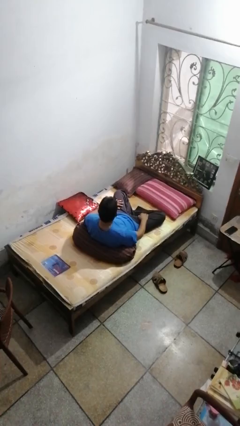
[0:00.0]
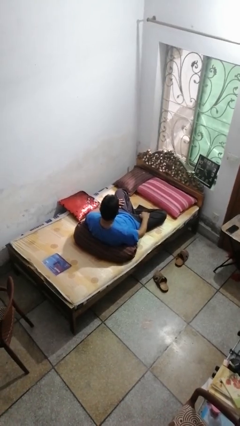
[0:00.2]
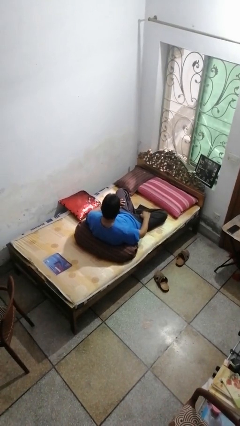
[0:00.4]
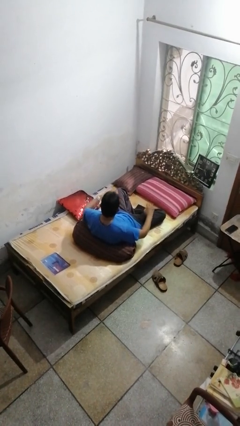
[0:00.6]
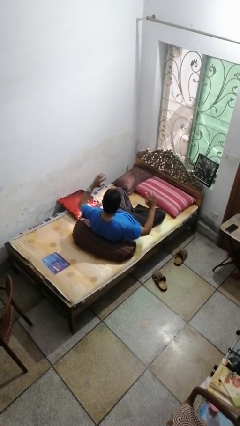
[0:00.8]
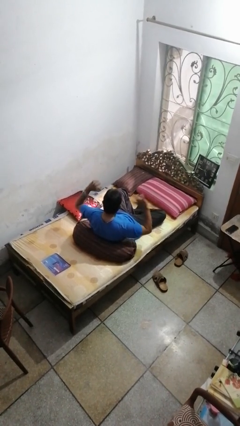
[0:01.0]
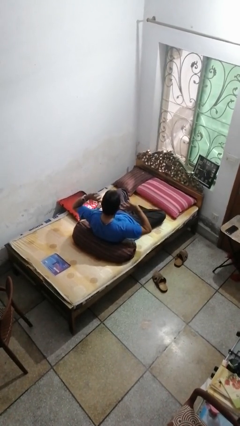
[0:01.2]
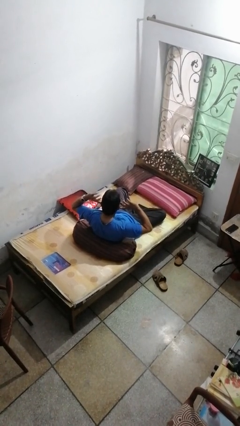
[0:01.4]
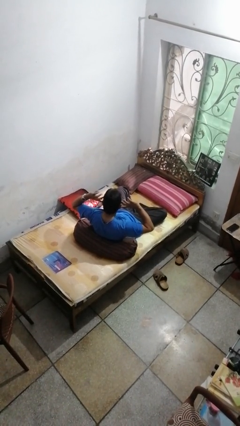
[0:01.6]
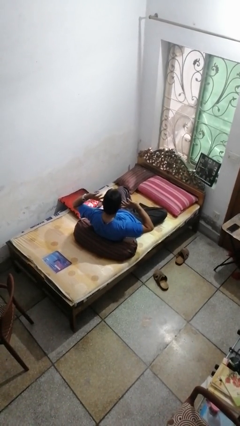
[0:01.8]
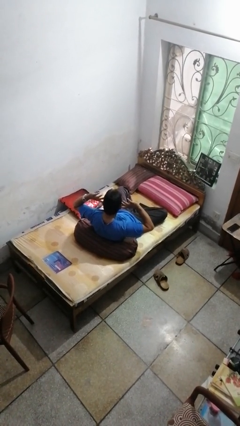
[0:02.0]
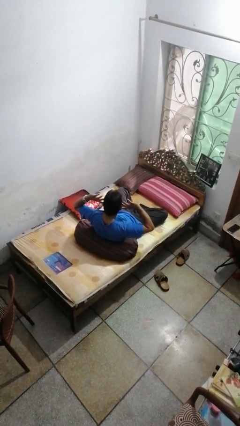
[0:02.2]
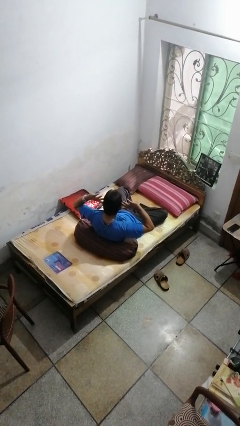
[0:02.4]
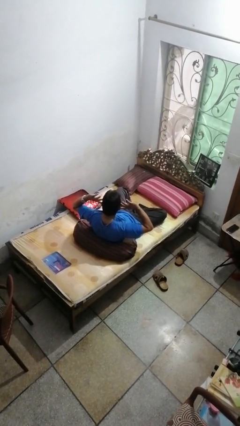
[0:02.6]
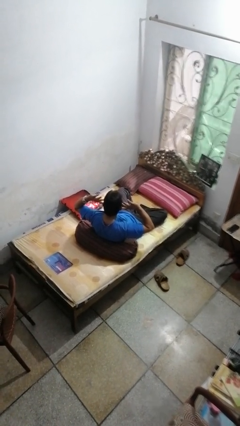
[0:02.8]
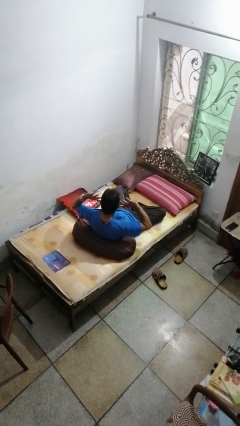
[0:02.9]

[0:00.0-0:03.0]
person puts fingers in ear

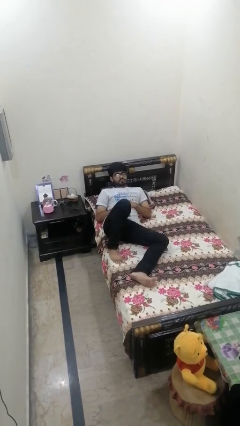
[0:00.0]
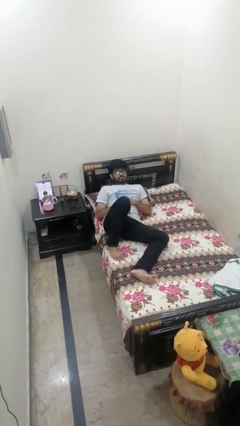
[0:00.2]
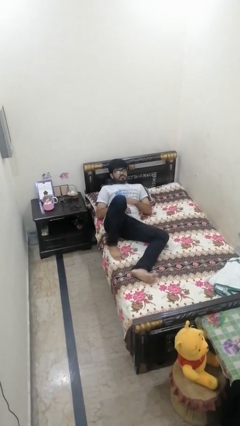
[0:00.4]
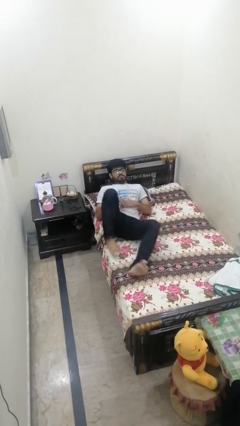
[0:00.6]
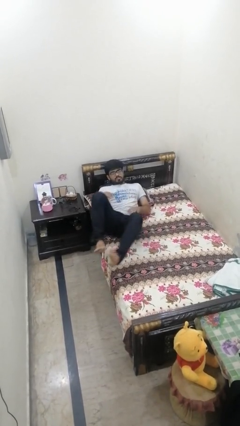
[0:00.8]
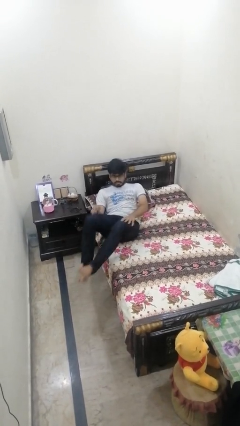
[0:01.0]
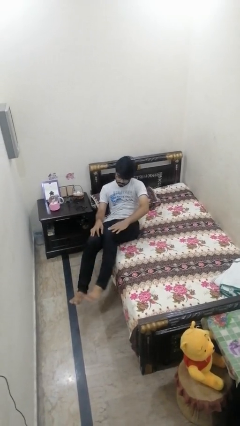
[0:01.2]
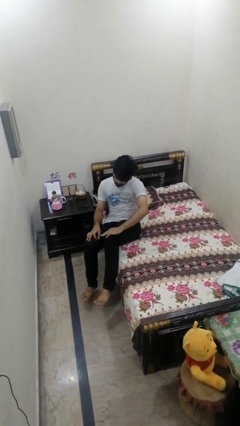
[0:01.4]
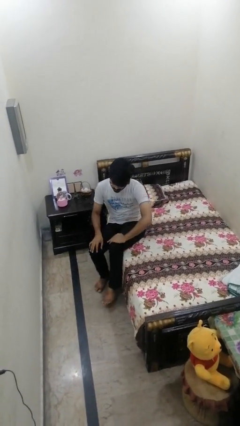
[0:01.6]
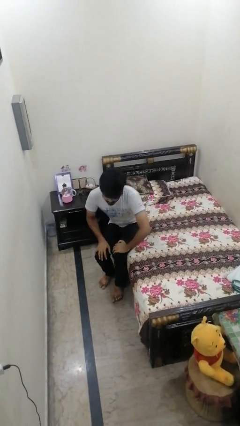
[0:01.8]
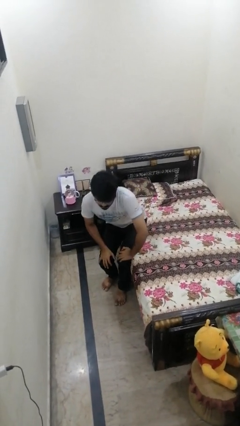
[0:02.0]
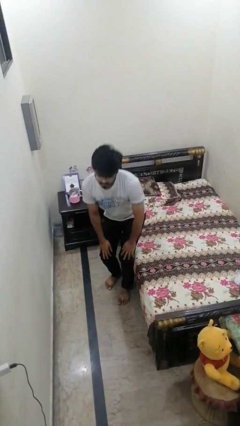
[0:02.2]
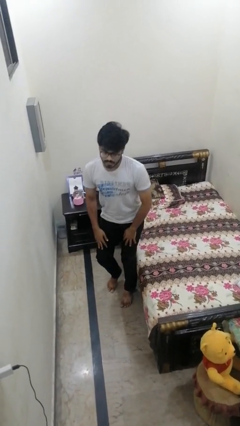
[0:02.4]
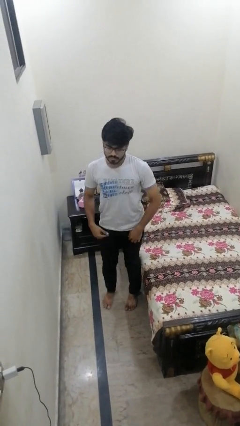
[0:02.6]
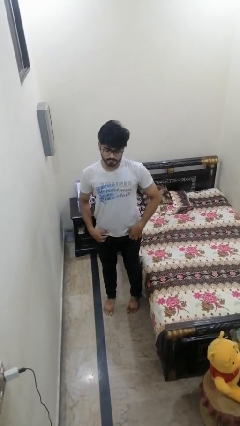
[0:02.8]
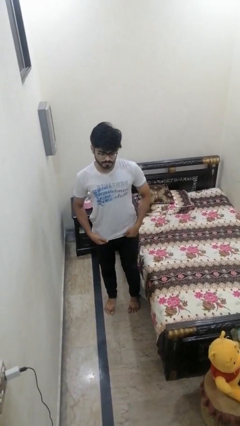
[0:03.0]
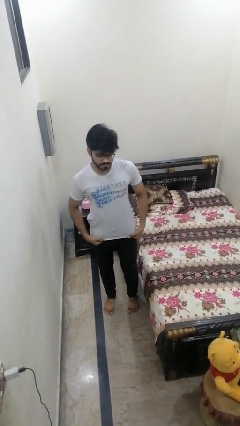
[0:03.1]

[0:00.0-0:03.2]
person stands up

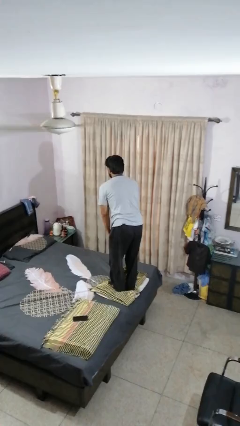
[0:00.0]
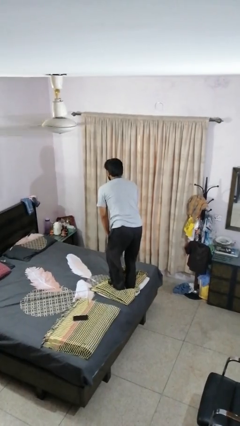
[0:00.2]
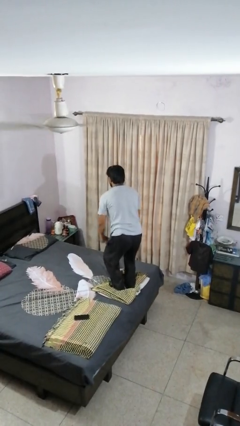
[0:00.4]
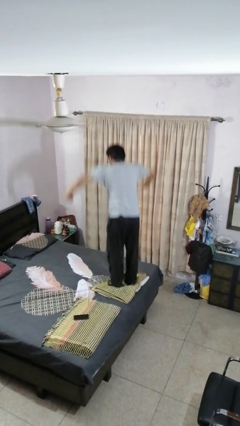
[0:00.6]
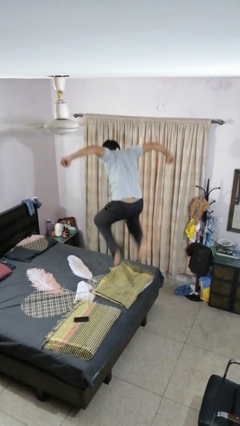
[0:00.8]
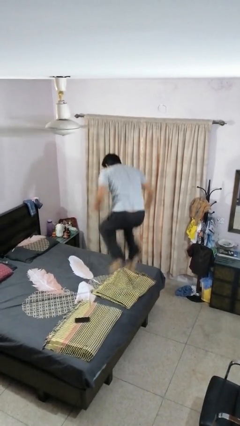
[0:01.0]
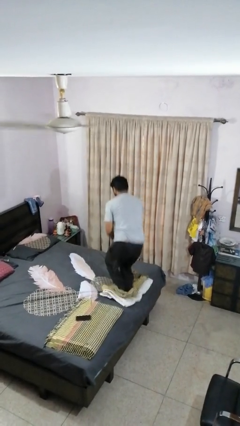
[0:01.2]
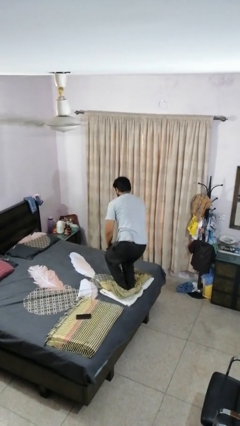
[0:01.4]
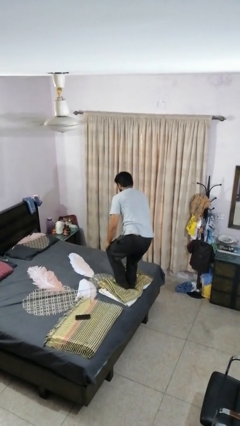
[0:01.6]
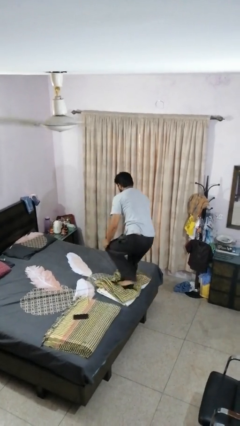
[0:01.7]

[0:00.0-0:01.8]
person jumps on bed

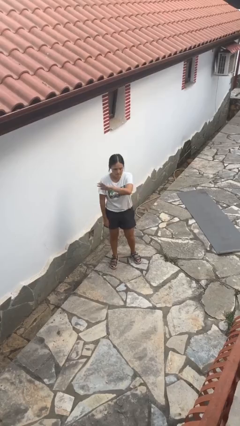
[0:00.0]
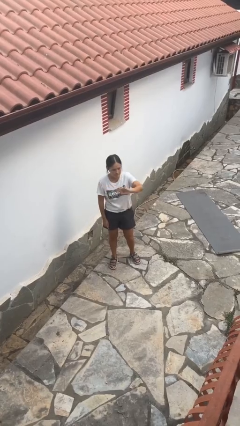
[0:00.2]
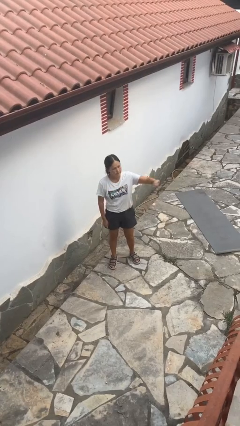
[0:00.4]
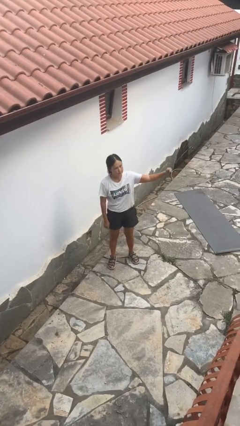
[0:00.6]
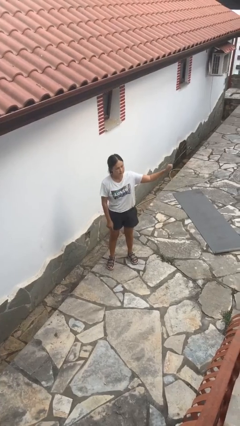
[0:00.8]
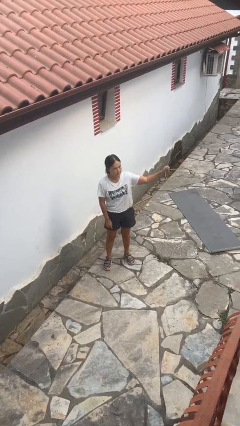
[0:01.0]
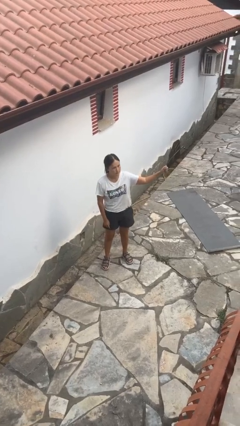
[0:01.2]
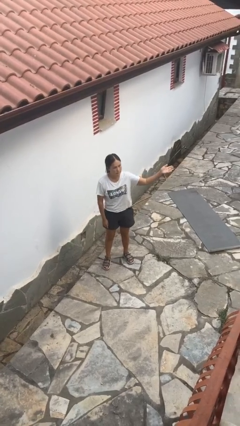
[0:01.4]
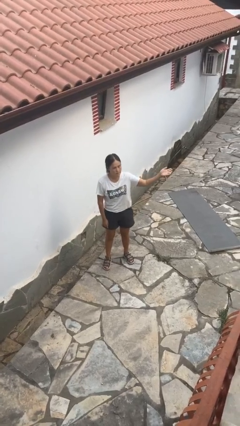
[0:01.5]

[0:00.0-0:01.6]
person gestures swipe left

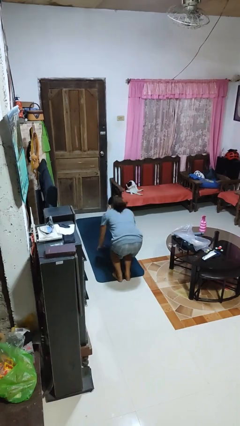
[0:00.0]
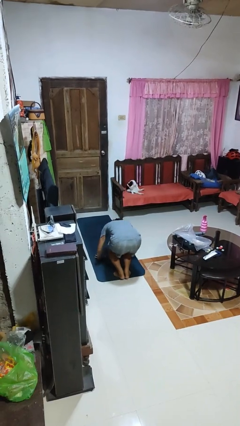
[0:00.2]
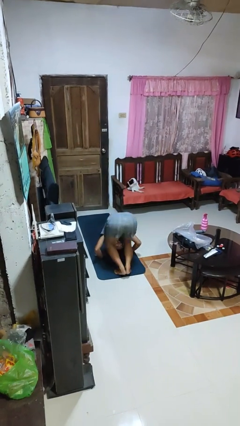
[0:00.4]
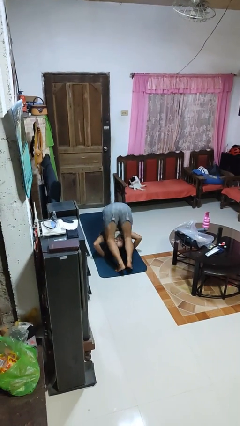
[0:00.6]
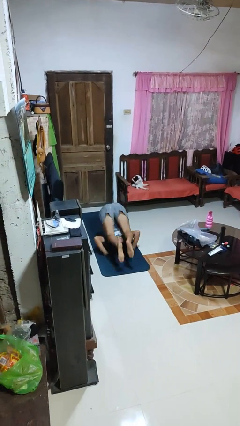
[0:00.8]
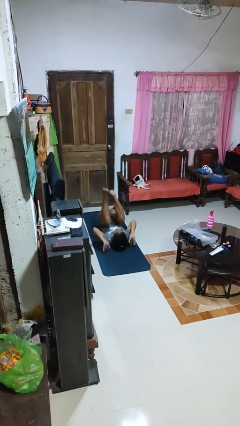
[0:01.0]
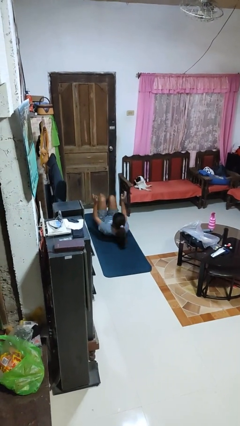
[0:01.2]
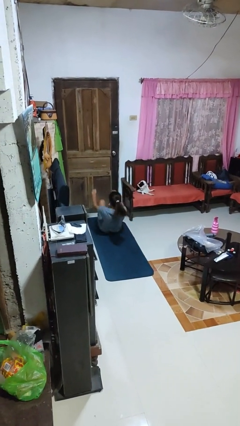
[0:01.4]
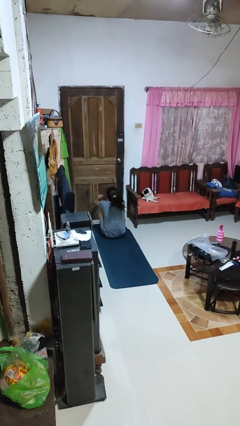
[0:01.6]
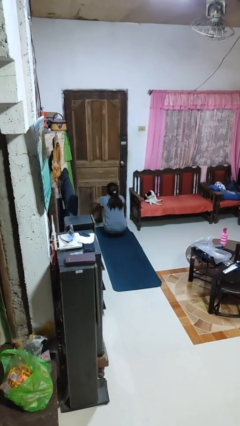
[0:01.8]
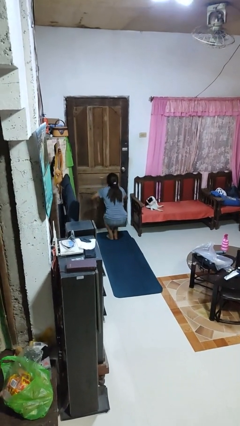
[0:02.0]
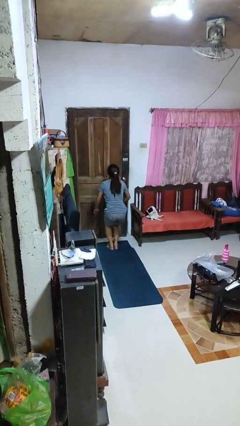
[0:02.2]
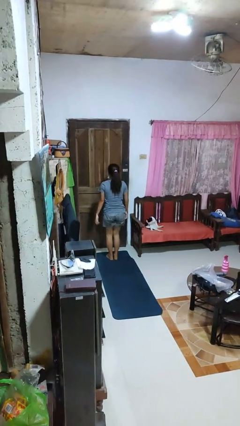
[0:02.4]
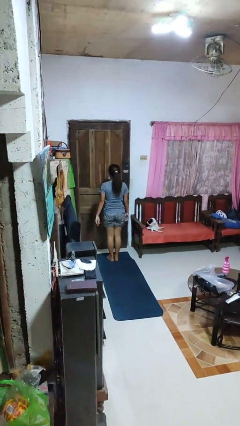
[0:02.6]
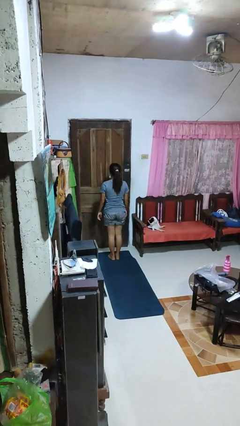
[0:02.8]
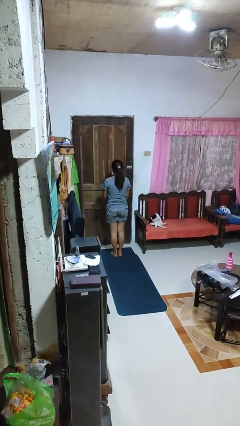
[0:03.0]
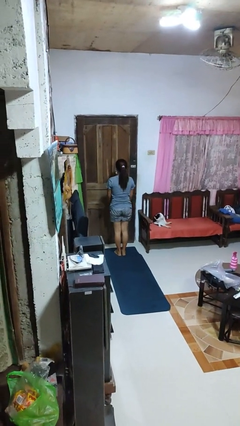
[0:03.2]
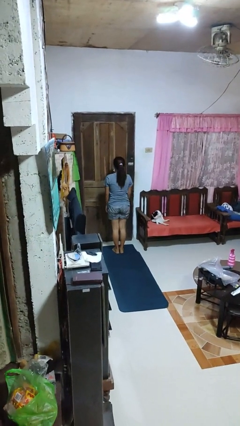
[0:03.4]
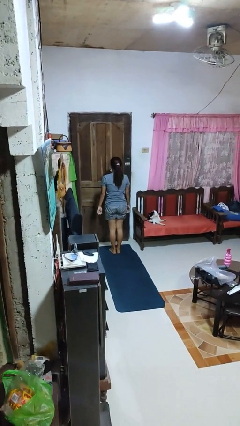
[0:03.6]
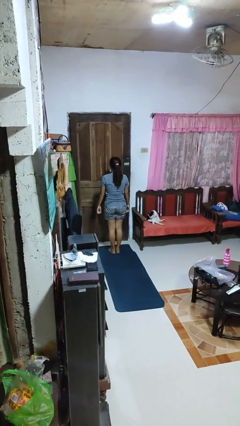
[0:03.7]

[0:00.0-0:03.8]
person somersaults

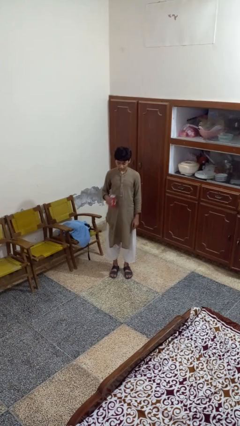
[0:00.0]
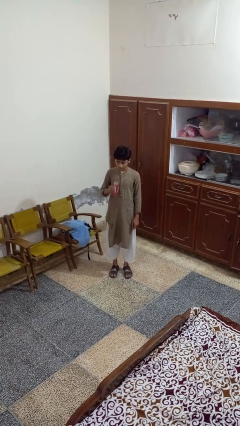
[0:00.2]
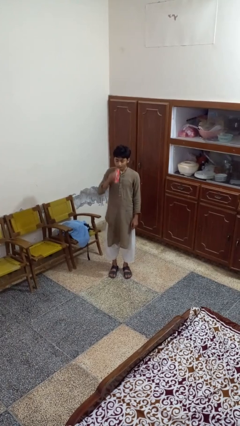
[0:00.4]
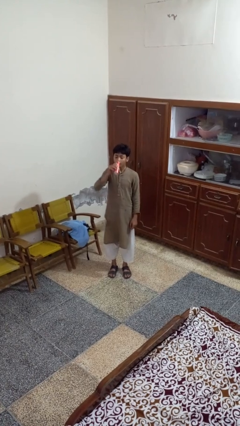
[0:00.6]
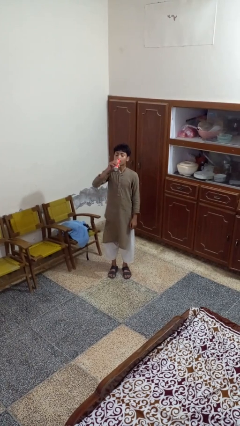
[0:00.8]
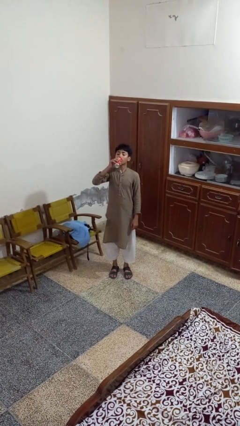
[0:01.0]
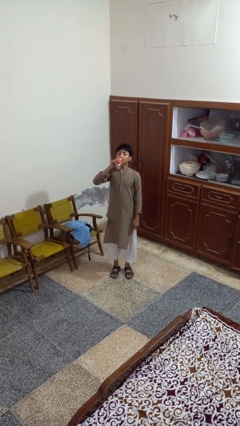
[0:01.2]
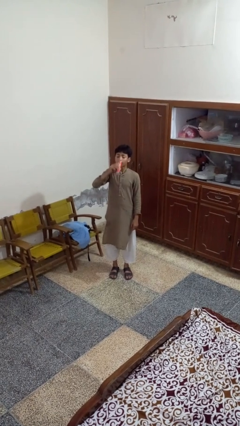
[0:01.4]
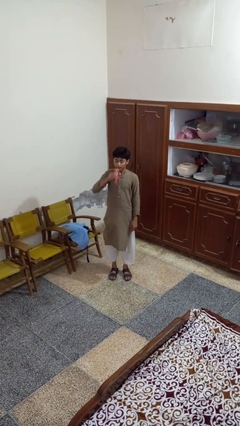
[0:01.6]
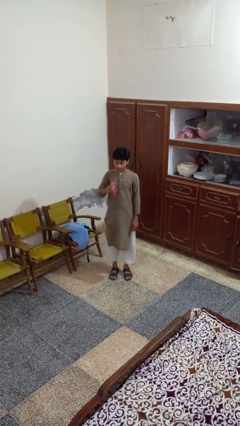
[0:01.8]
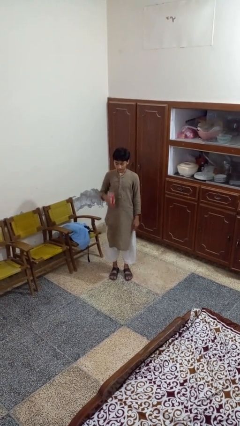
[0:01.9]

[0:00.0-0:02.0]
person drinks from beverage can

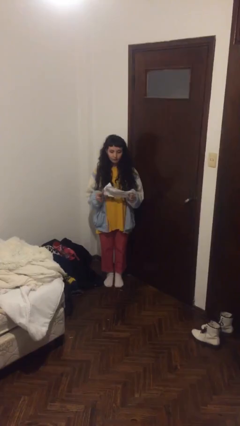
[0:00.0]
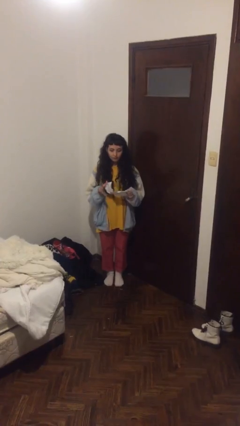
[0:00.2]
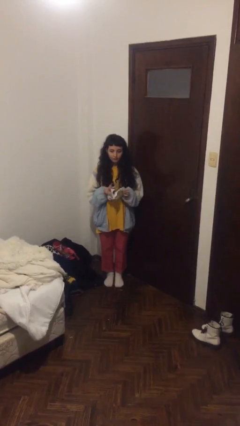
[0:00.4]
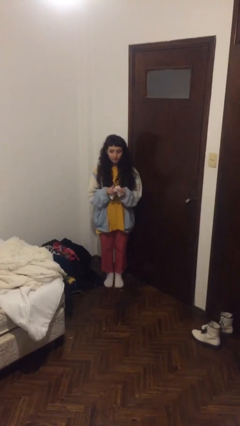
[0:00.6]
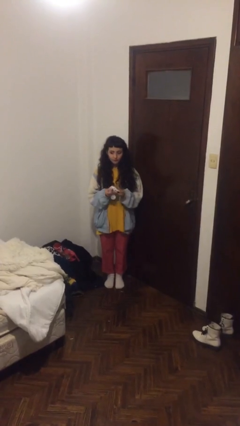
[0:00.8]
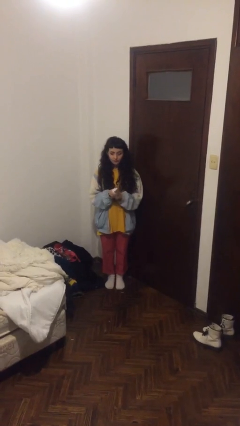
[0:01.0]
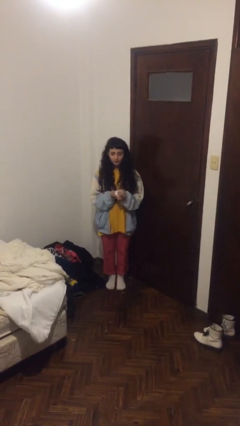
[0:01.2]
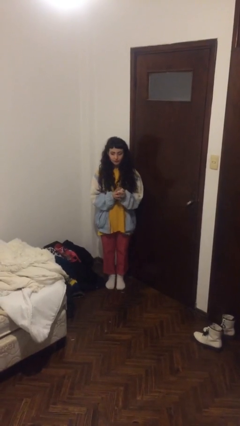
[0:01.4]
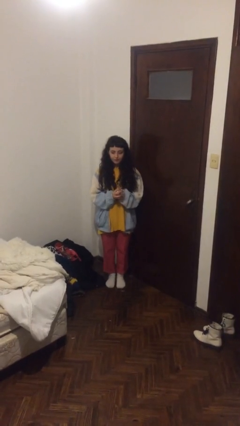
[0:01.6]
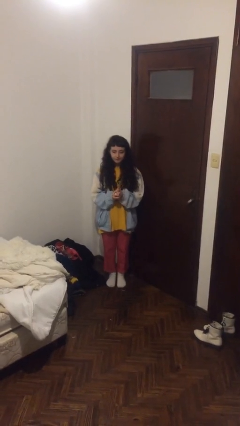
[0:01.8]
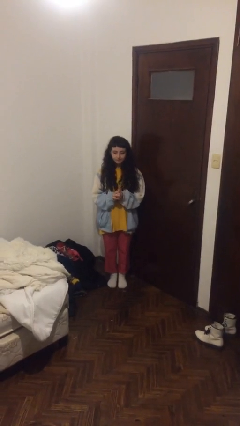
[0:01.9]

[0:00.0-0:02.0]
person crumples paper
